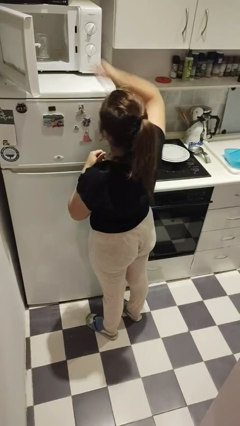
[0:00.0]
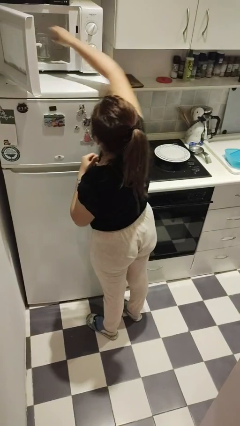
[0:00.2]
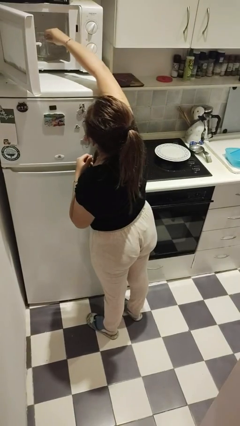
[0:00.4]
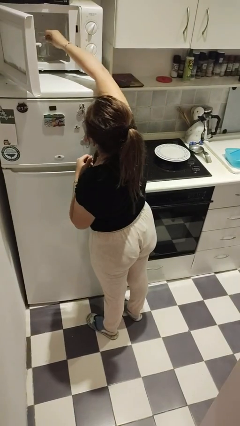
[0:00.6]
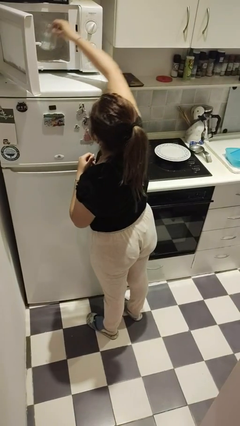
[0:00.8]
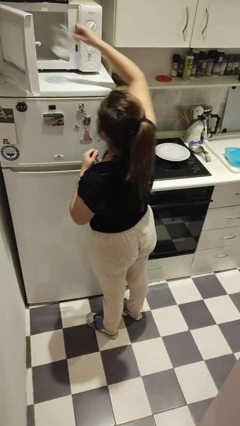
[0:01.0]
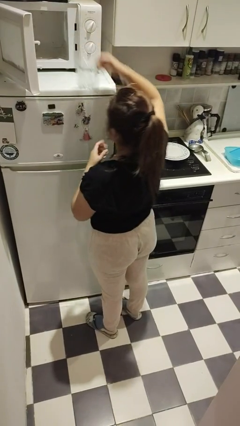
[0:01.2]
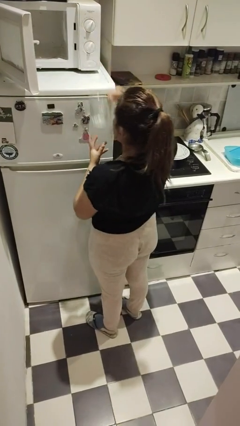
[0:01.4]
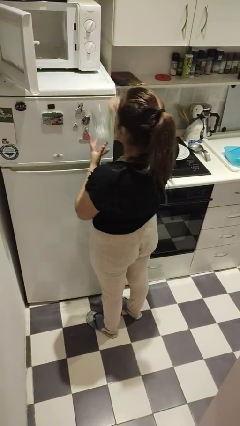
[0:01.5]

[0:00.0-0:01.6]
person takes object from microwave

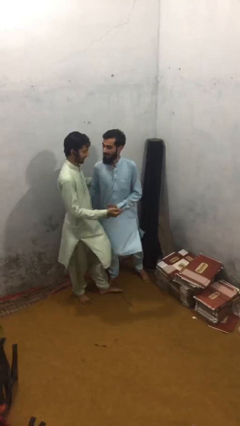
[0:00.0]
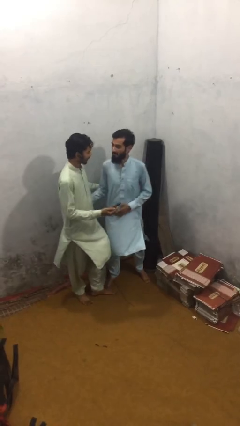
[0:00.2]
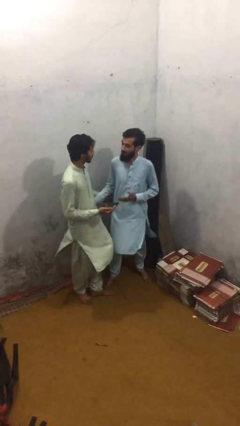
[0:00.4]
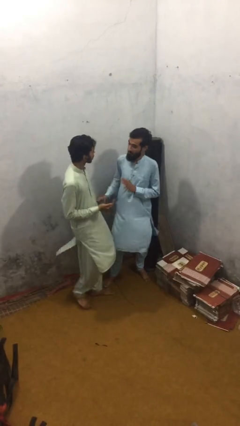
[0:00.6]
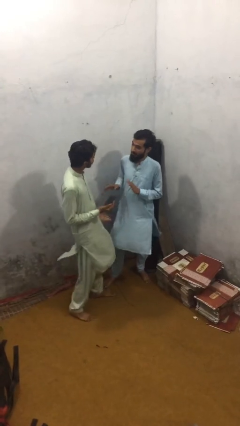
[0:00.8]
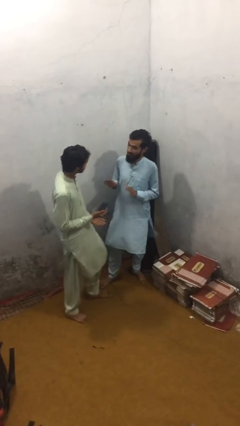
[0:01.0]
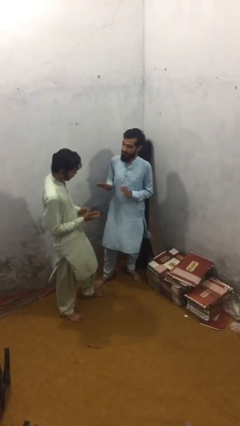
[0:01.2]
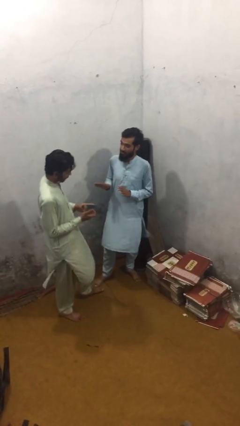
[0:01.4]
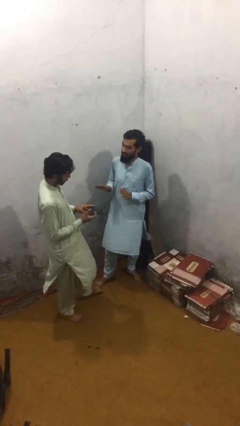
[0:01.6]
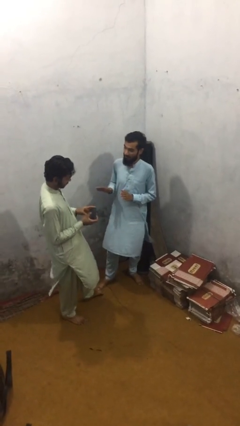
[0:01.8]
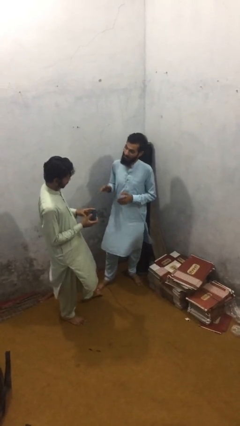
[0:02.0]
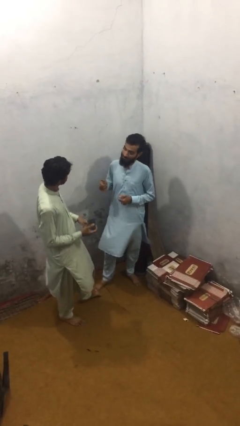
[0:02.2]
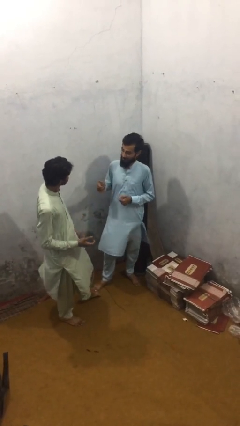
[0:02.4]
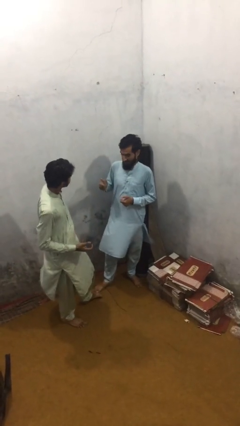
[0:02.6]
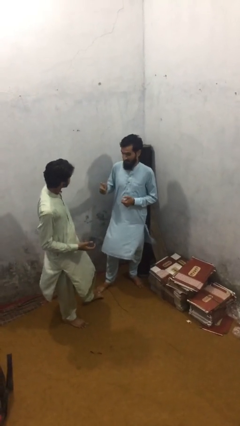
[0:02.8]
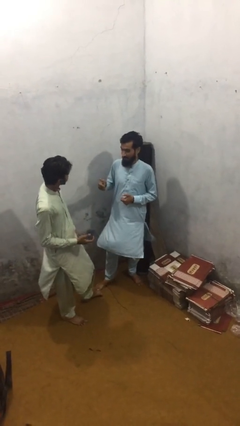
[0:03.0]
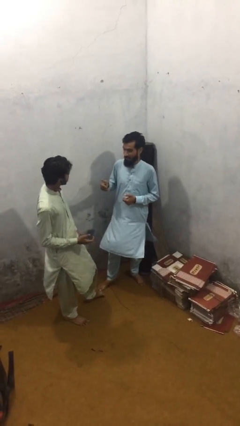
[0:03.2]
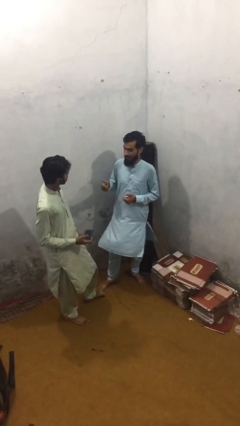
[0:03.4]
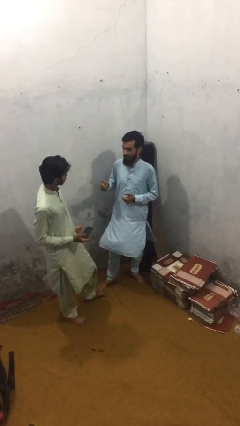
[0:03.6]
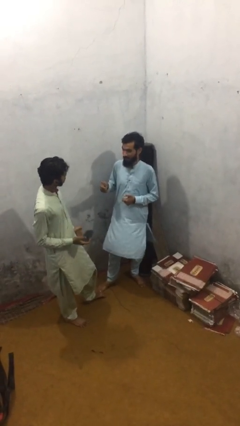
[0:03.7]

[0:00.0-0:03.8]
person talks to person

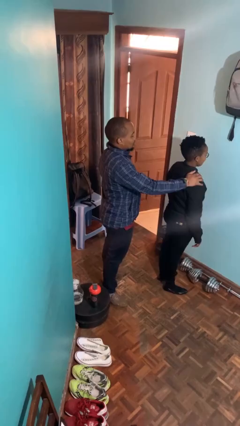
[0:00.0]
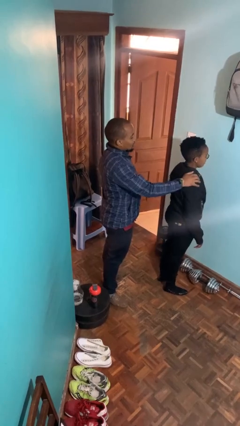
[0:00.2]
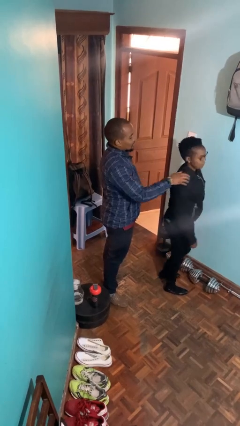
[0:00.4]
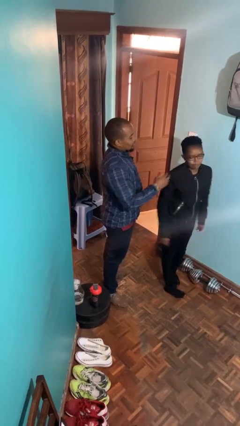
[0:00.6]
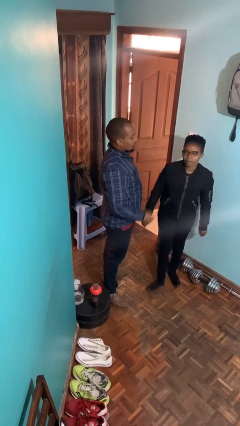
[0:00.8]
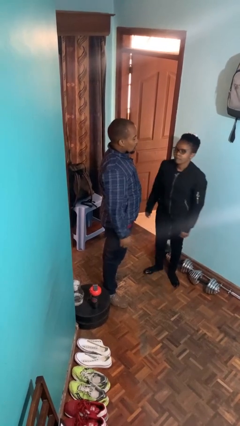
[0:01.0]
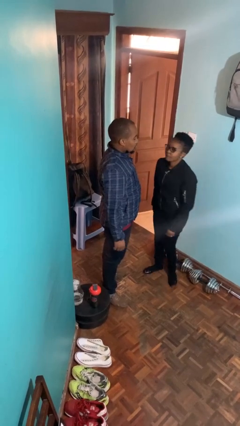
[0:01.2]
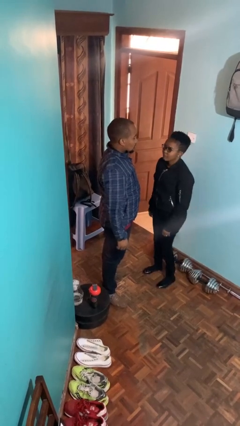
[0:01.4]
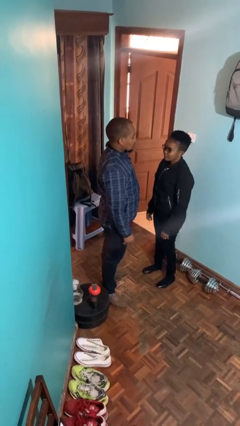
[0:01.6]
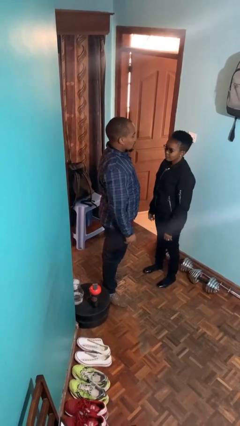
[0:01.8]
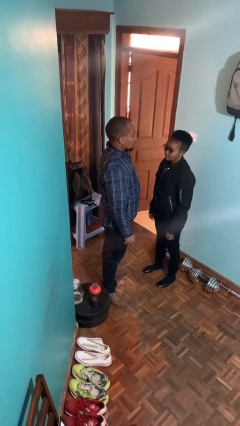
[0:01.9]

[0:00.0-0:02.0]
person spins person around

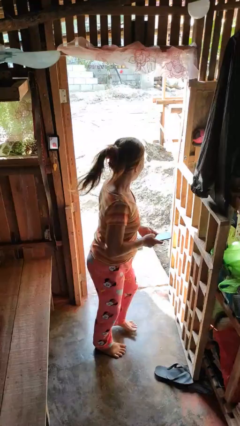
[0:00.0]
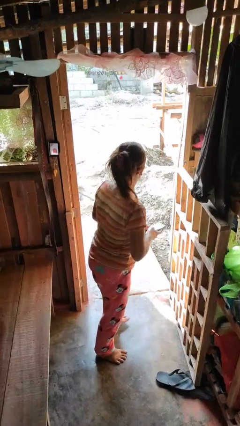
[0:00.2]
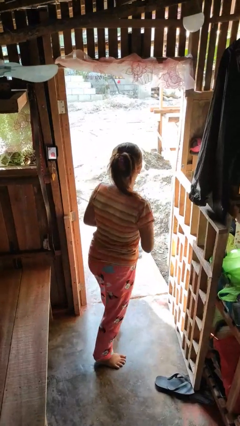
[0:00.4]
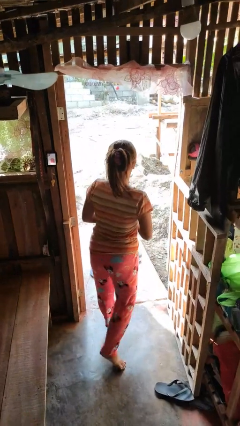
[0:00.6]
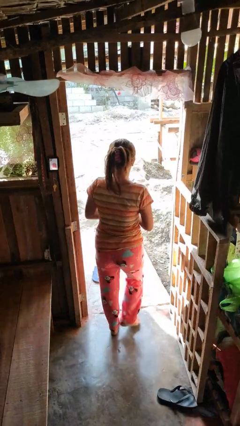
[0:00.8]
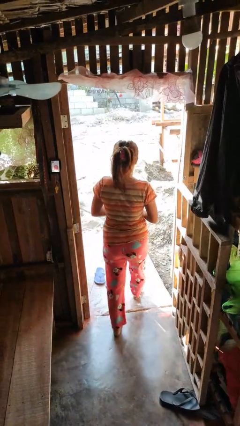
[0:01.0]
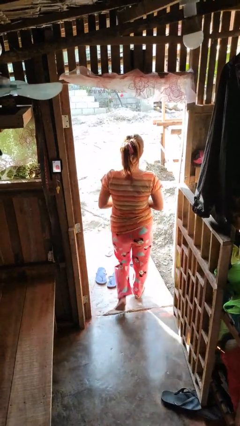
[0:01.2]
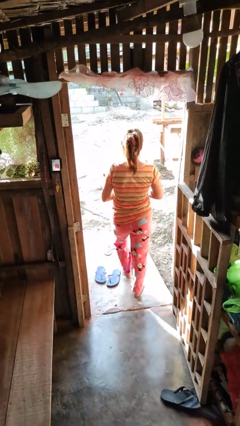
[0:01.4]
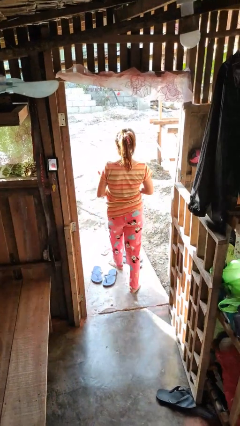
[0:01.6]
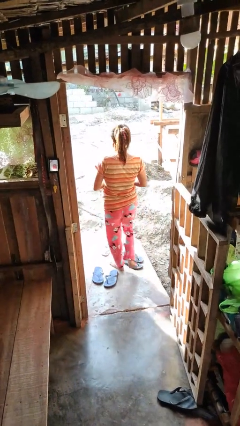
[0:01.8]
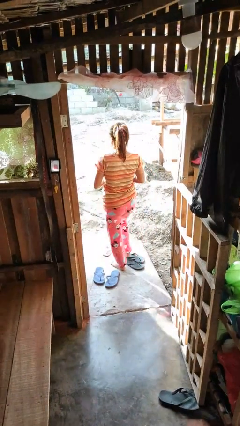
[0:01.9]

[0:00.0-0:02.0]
person exits scene through structure

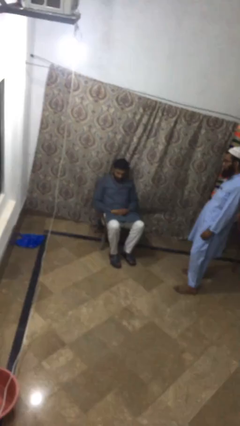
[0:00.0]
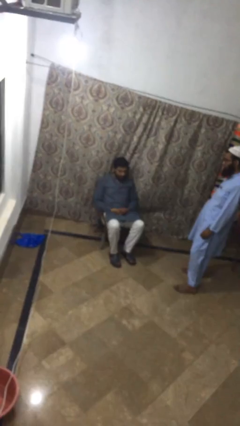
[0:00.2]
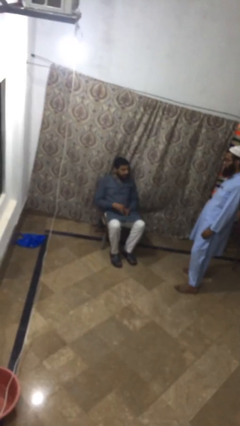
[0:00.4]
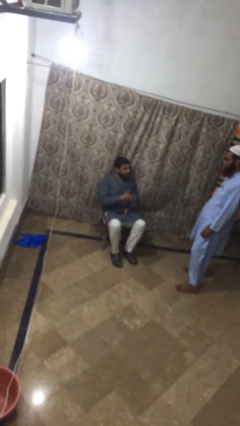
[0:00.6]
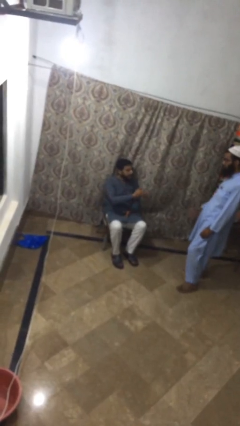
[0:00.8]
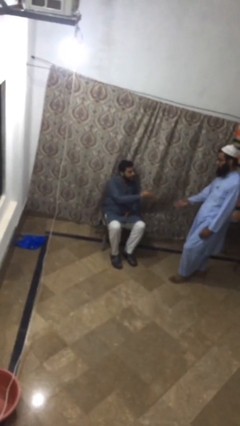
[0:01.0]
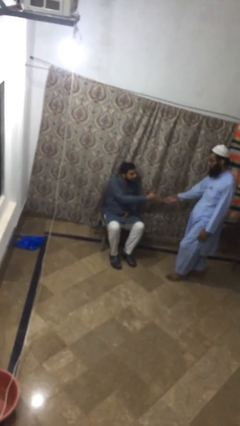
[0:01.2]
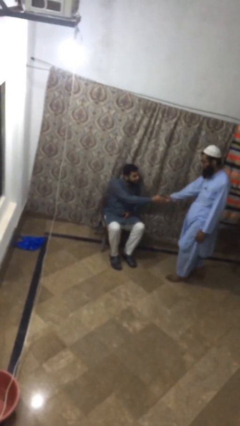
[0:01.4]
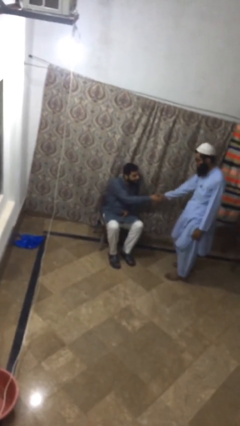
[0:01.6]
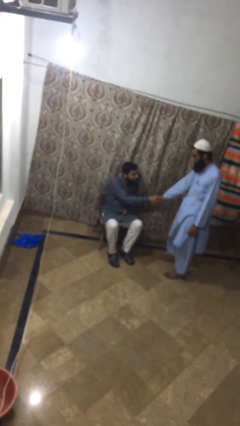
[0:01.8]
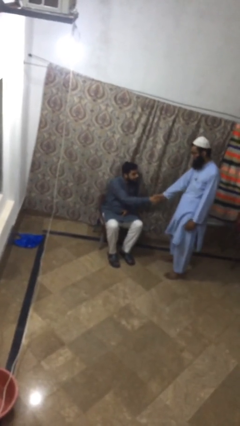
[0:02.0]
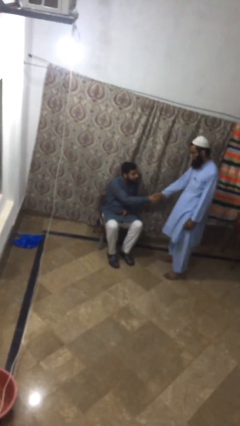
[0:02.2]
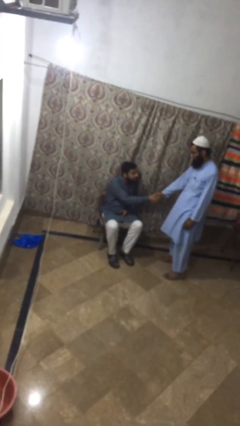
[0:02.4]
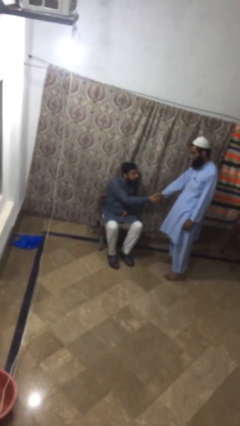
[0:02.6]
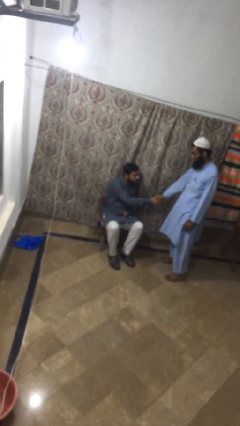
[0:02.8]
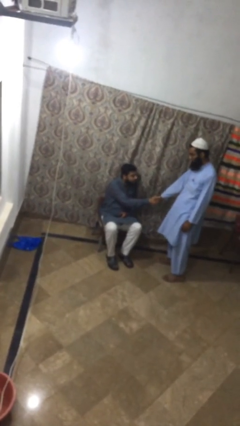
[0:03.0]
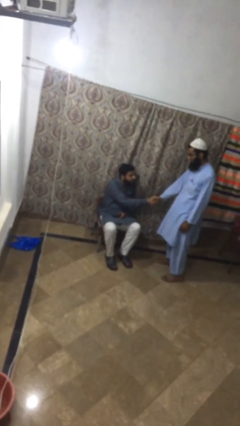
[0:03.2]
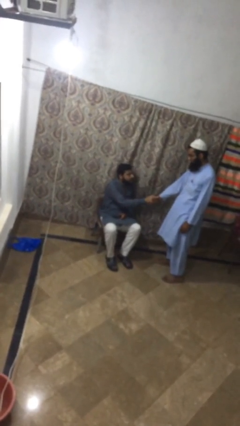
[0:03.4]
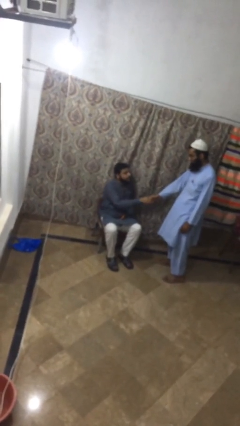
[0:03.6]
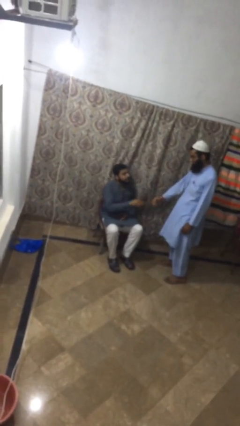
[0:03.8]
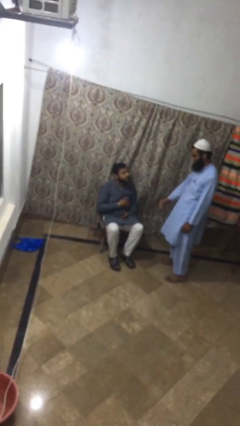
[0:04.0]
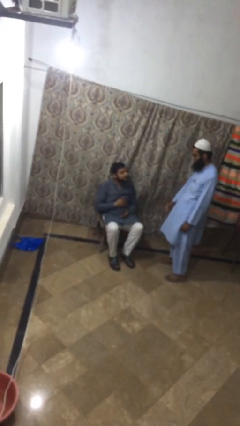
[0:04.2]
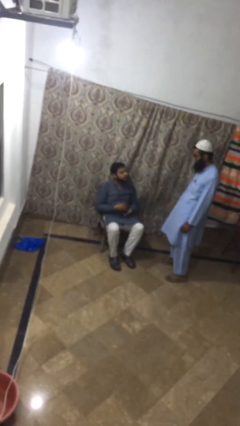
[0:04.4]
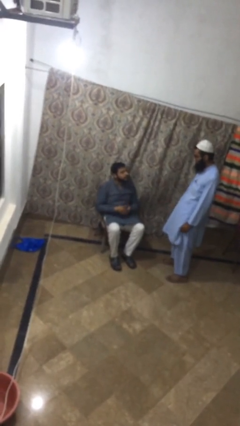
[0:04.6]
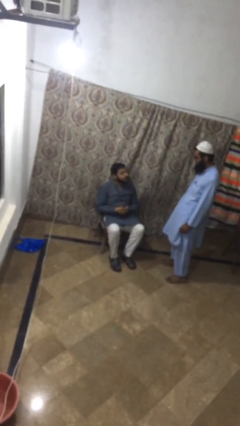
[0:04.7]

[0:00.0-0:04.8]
person shakes hand

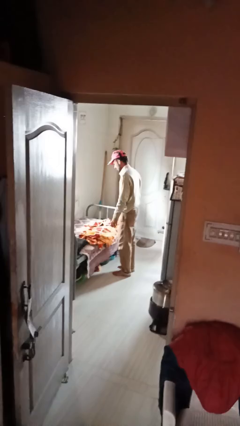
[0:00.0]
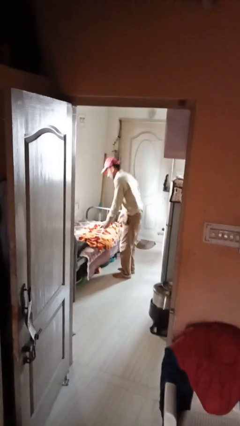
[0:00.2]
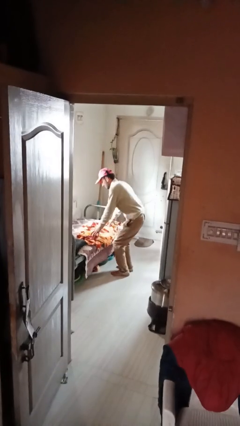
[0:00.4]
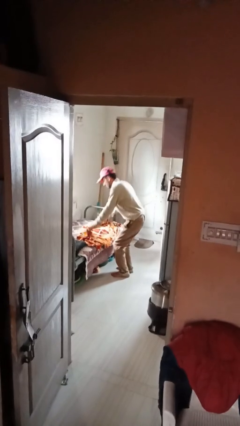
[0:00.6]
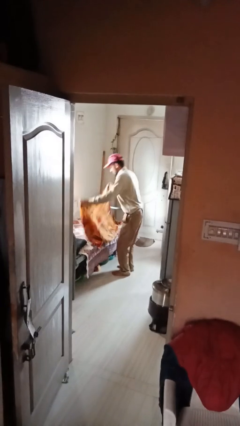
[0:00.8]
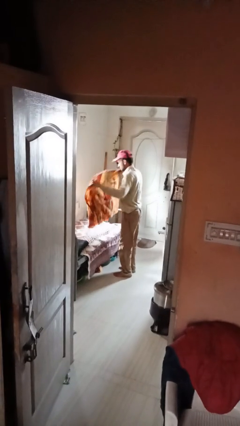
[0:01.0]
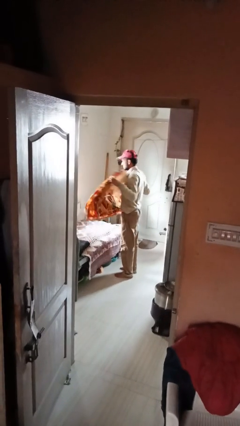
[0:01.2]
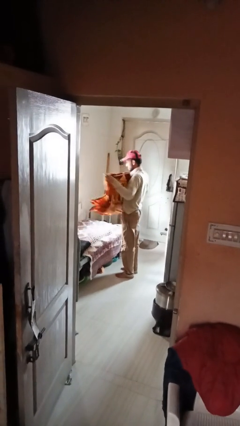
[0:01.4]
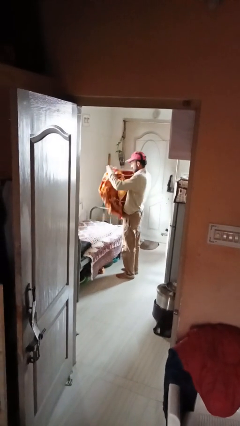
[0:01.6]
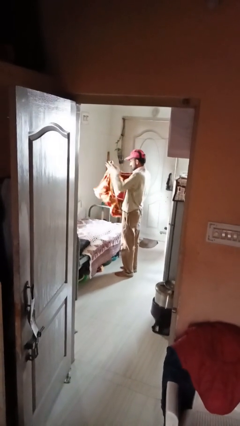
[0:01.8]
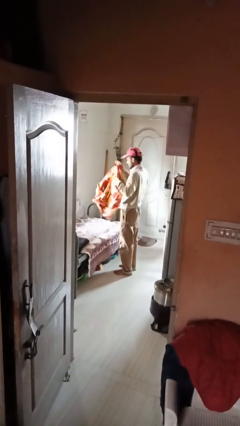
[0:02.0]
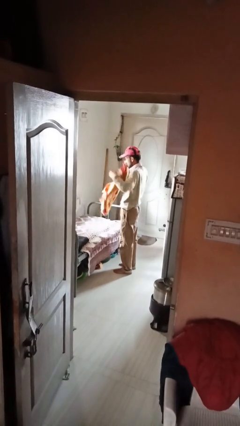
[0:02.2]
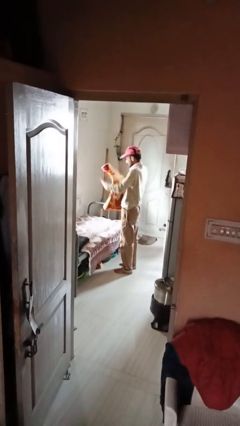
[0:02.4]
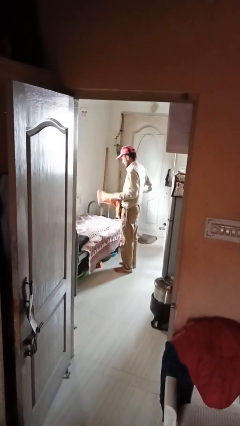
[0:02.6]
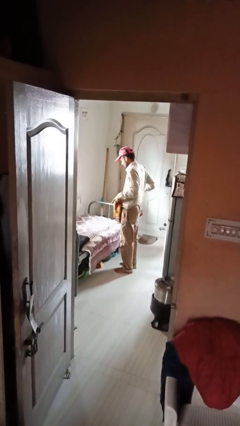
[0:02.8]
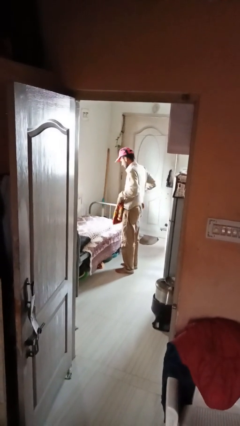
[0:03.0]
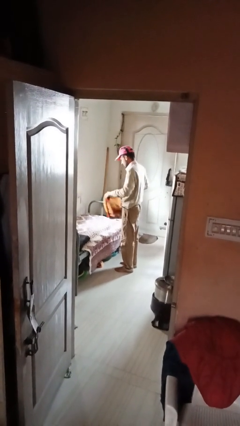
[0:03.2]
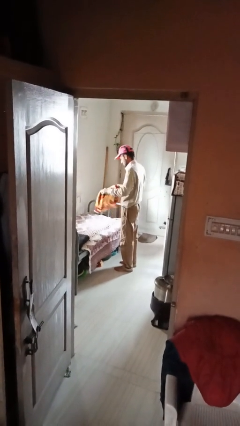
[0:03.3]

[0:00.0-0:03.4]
person folds blanket
